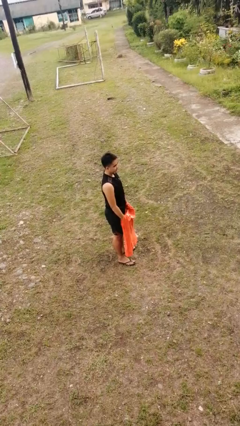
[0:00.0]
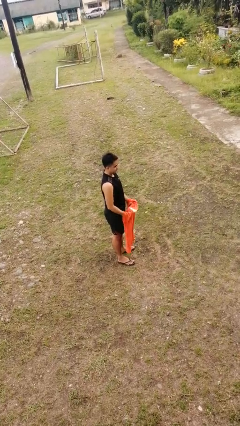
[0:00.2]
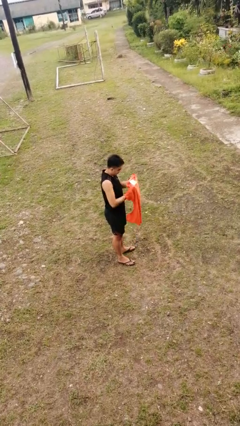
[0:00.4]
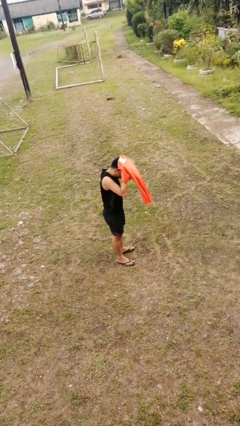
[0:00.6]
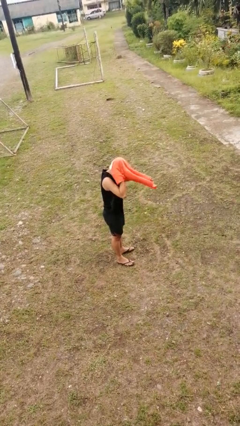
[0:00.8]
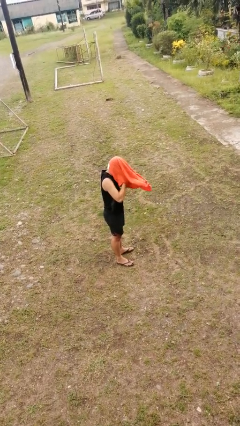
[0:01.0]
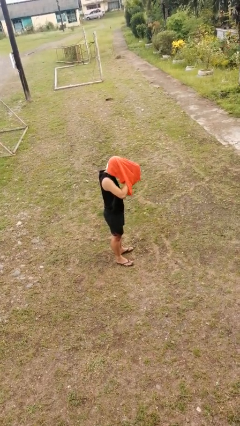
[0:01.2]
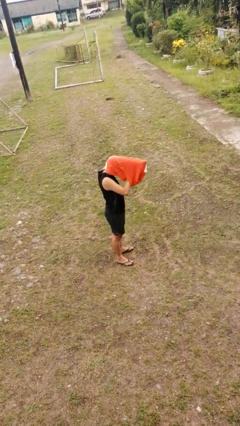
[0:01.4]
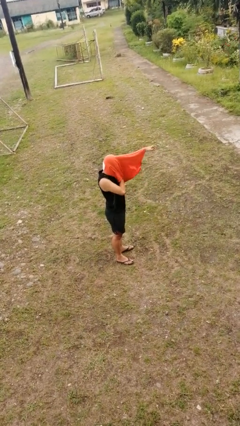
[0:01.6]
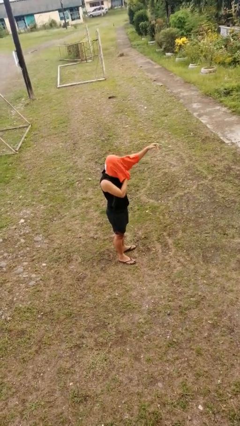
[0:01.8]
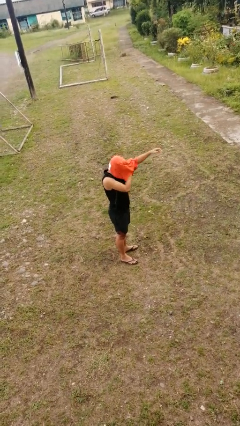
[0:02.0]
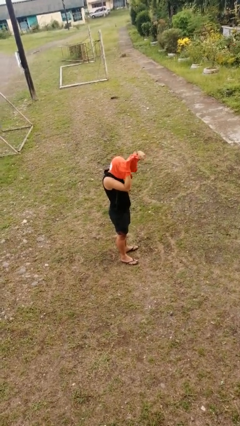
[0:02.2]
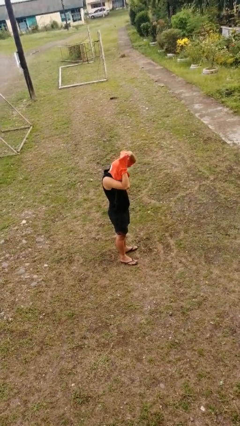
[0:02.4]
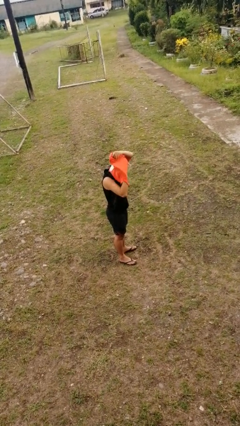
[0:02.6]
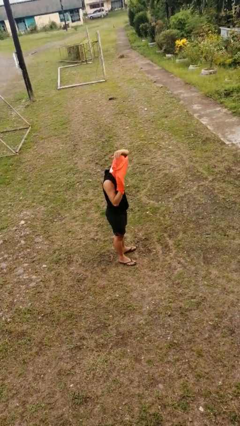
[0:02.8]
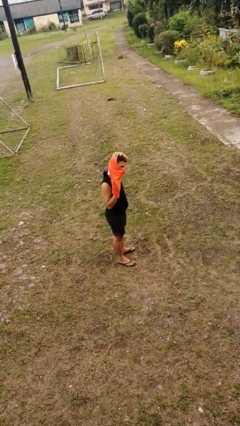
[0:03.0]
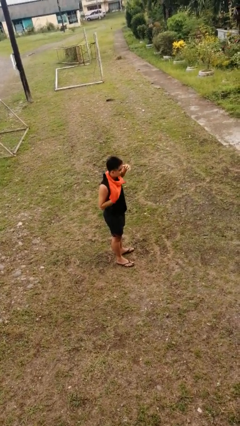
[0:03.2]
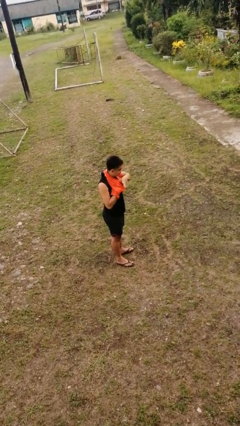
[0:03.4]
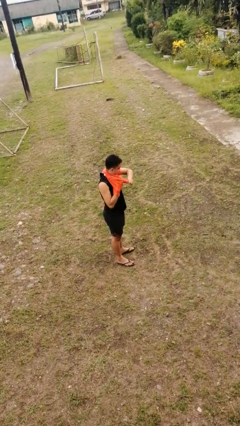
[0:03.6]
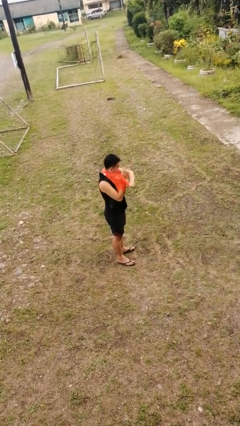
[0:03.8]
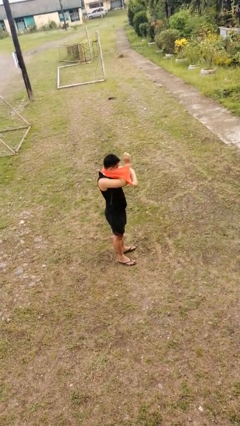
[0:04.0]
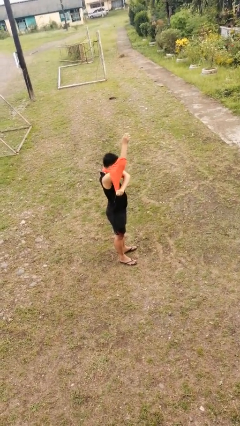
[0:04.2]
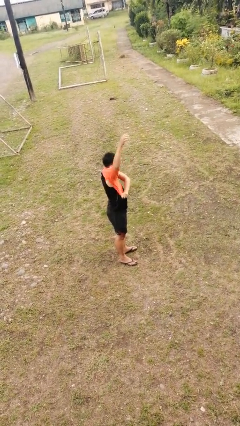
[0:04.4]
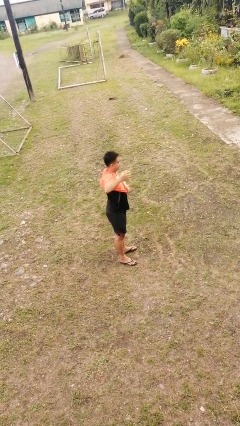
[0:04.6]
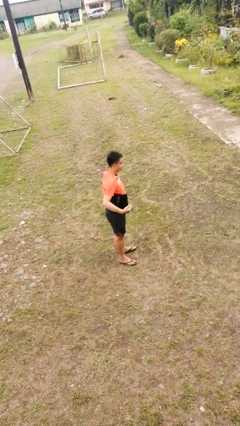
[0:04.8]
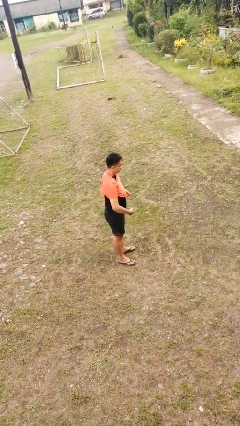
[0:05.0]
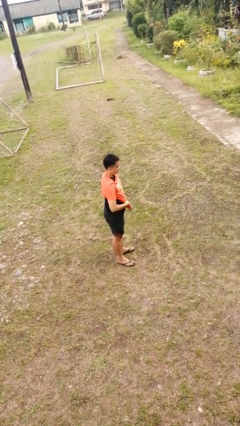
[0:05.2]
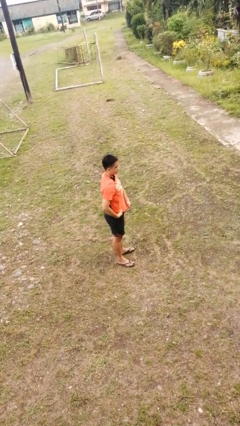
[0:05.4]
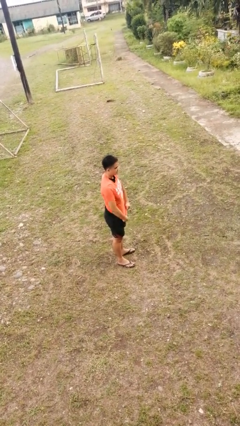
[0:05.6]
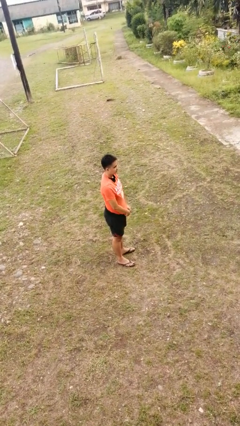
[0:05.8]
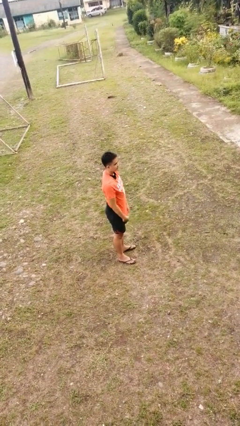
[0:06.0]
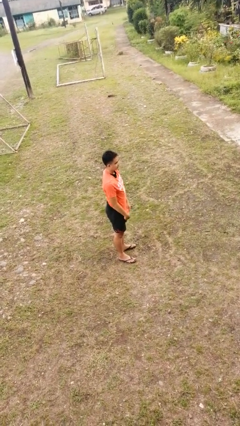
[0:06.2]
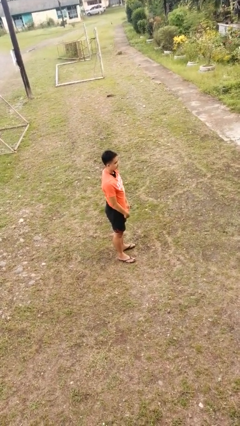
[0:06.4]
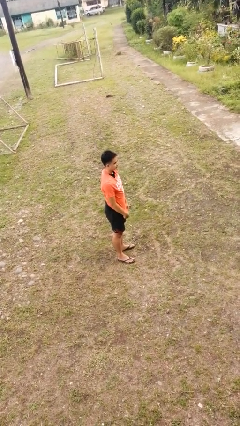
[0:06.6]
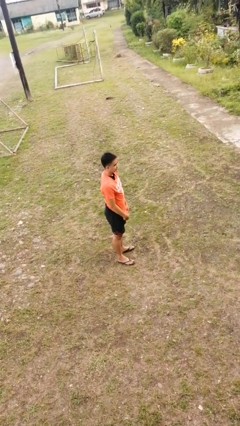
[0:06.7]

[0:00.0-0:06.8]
person puts on shirt

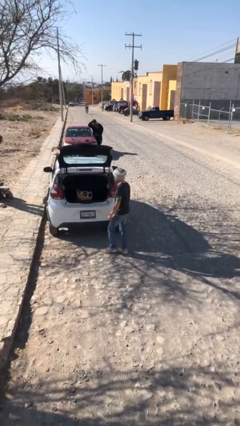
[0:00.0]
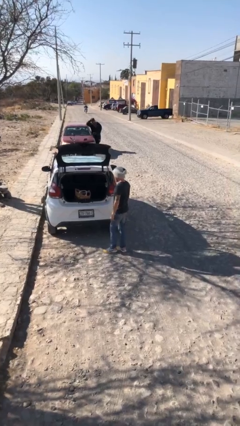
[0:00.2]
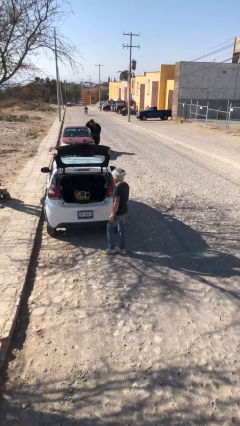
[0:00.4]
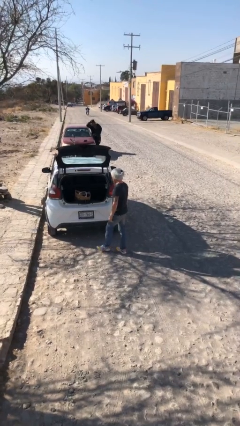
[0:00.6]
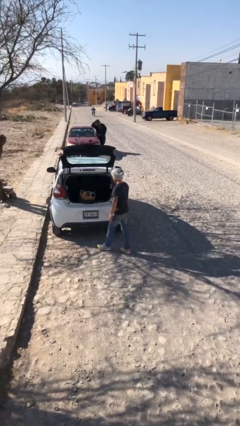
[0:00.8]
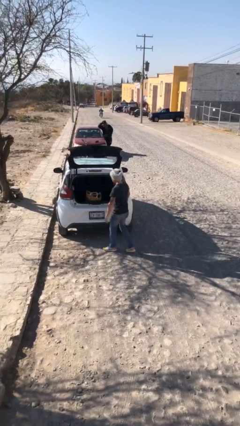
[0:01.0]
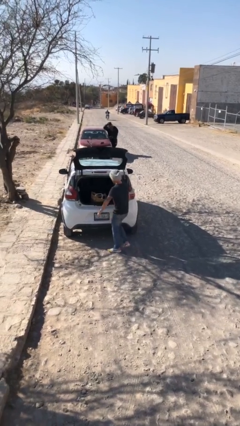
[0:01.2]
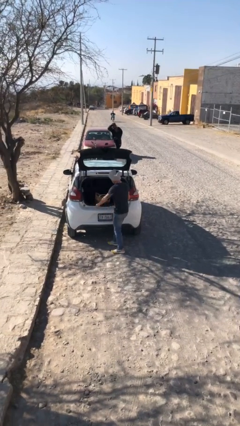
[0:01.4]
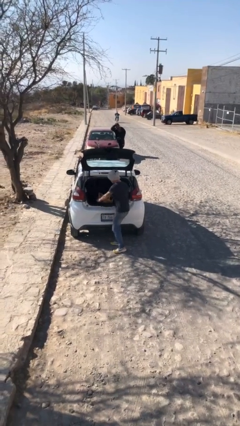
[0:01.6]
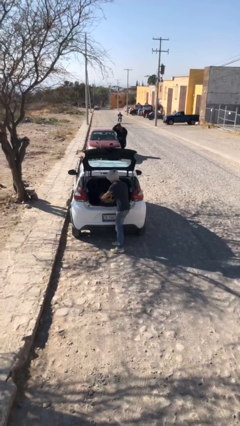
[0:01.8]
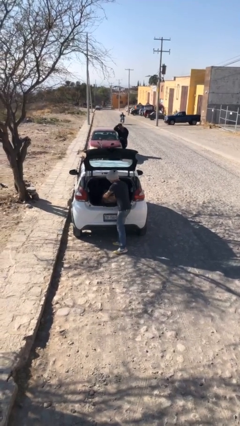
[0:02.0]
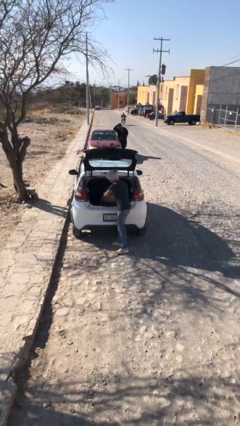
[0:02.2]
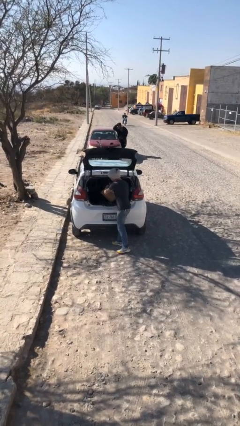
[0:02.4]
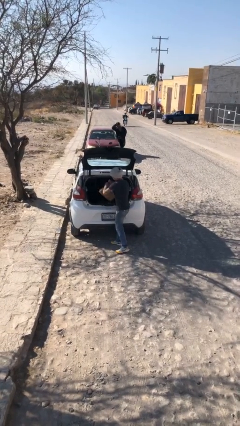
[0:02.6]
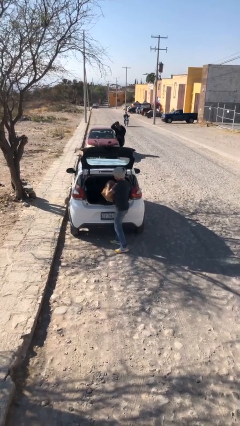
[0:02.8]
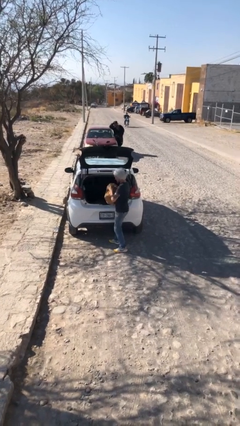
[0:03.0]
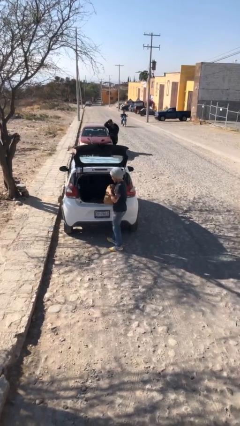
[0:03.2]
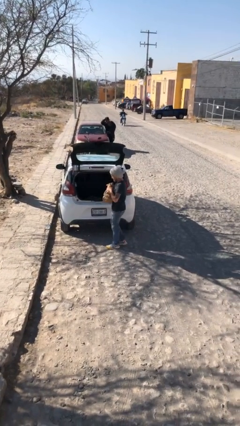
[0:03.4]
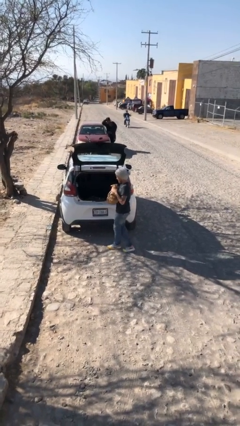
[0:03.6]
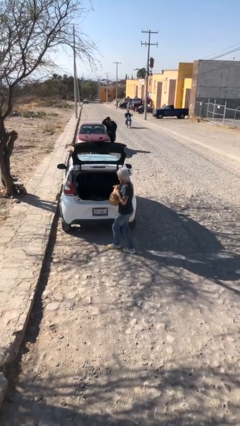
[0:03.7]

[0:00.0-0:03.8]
person unloads car

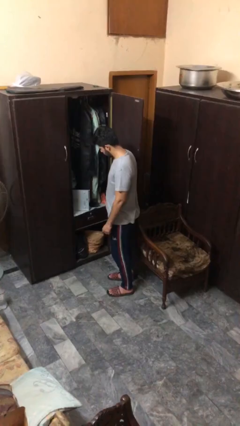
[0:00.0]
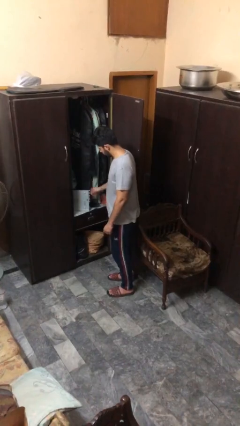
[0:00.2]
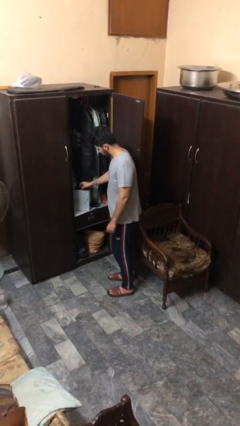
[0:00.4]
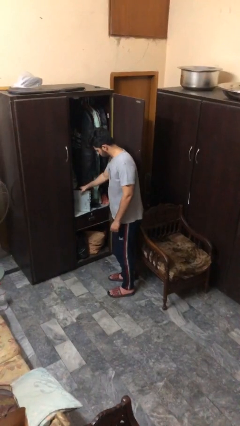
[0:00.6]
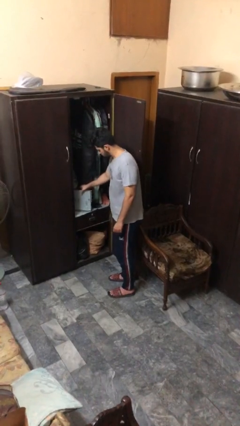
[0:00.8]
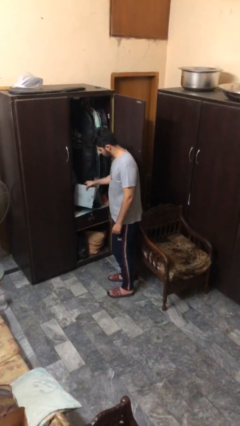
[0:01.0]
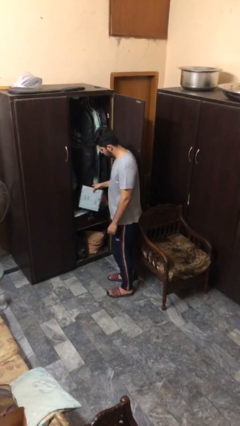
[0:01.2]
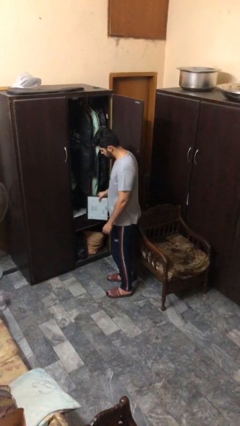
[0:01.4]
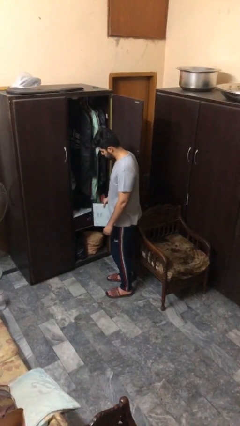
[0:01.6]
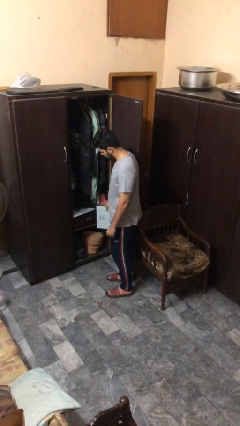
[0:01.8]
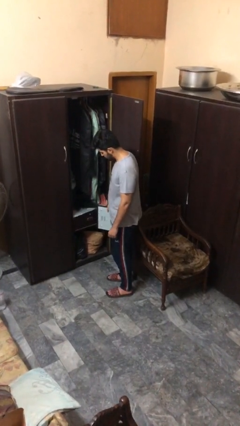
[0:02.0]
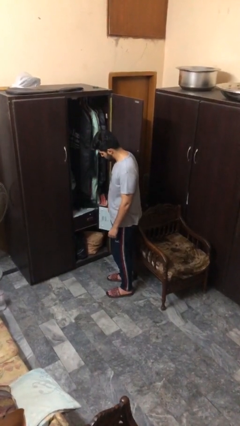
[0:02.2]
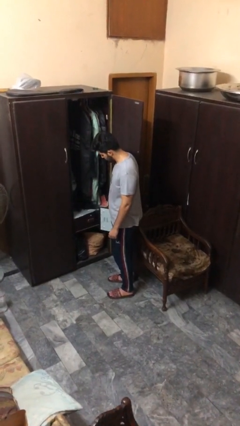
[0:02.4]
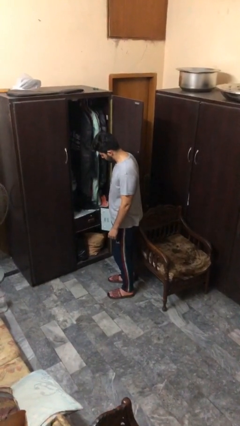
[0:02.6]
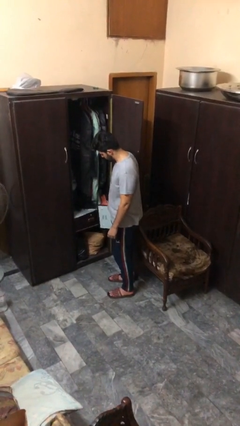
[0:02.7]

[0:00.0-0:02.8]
person picks up object from cabinet

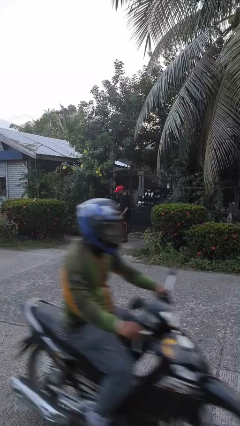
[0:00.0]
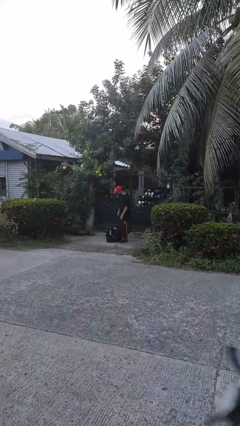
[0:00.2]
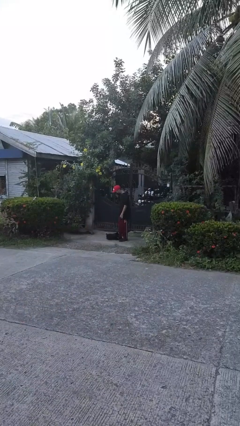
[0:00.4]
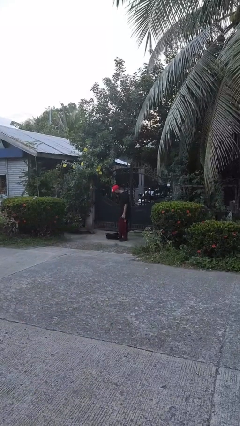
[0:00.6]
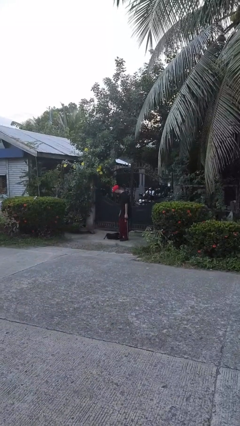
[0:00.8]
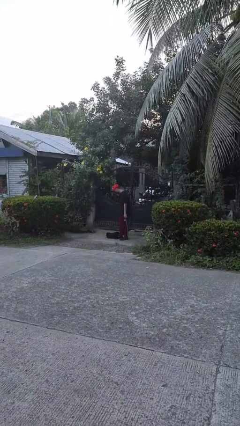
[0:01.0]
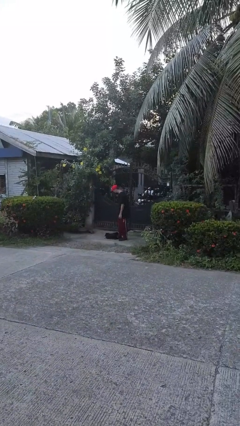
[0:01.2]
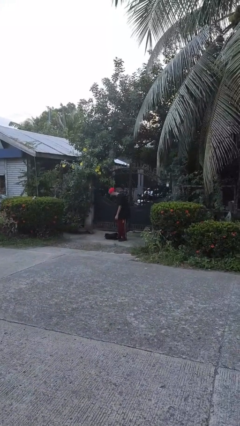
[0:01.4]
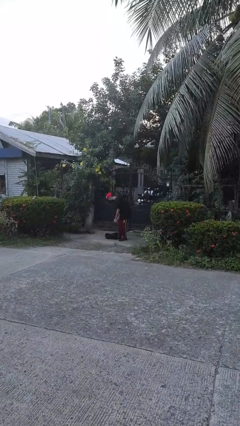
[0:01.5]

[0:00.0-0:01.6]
person drops object

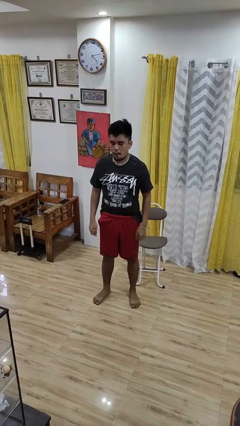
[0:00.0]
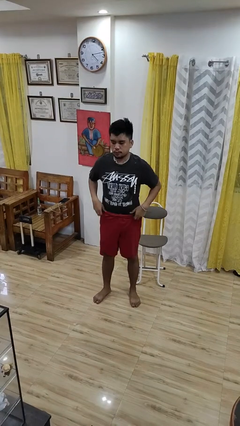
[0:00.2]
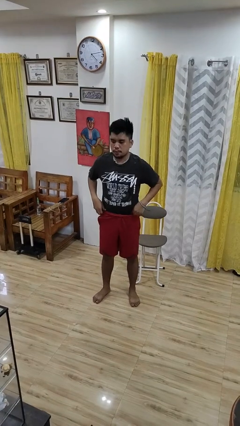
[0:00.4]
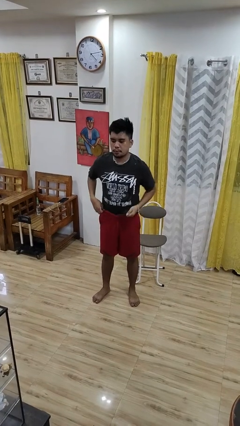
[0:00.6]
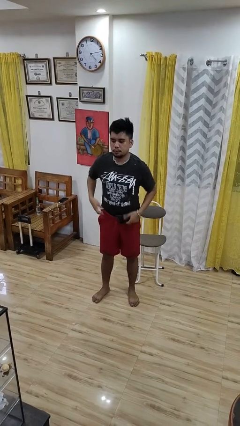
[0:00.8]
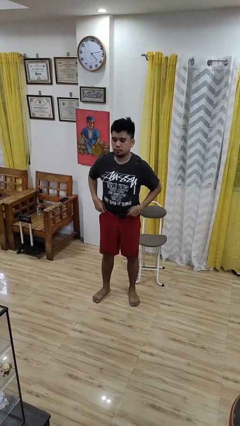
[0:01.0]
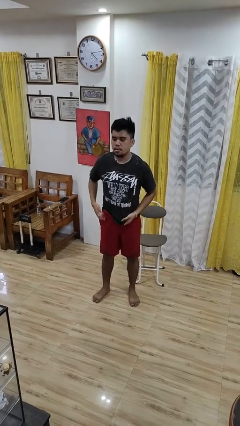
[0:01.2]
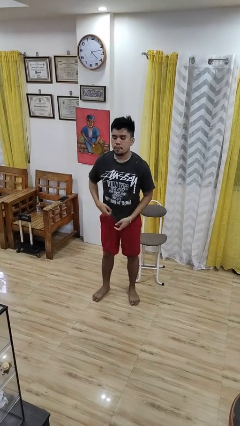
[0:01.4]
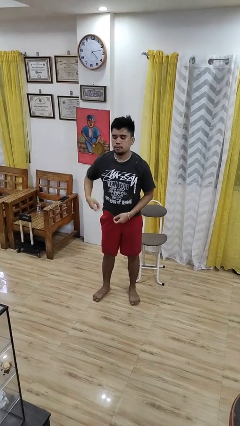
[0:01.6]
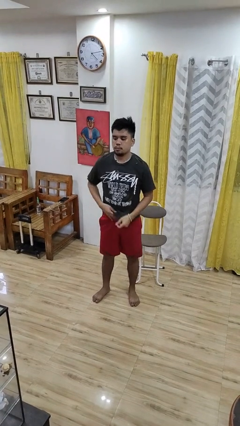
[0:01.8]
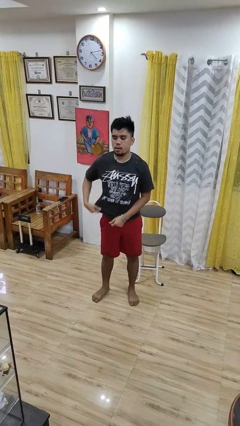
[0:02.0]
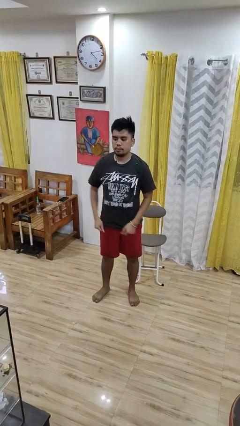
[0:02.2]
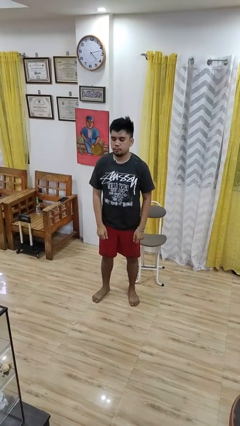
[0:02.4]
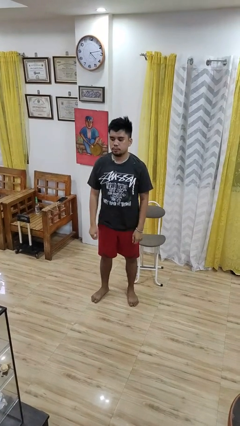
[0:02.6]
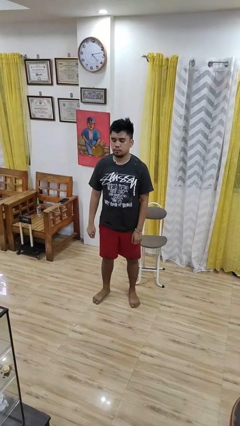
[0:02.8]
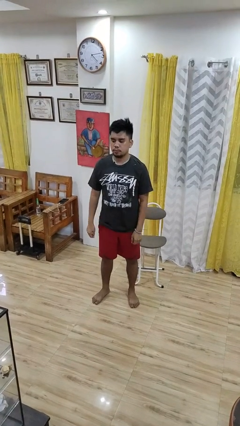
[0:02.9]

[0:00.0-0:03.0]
person untucks shirt
